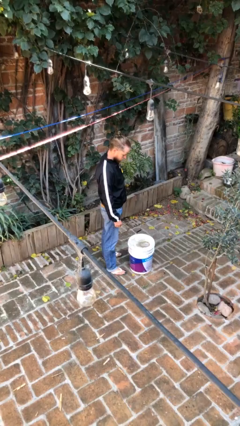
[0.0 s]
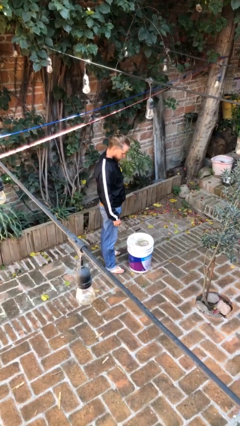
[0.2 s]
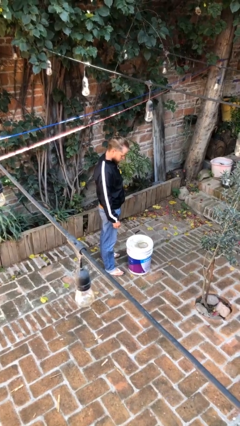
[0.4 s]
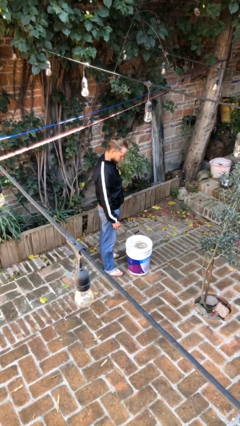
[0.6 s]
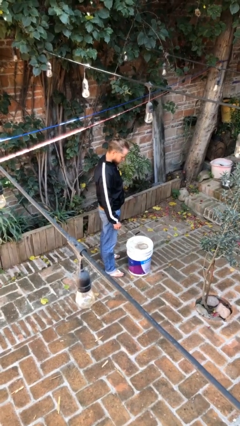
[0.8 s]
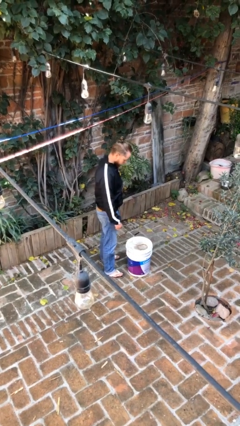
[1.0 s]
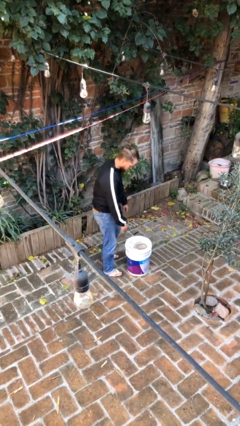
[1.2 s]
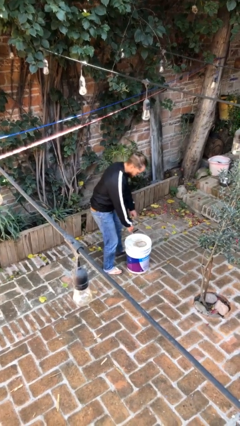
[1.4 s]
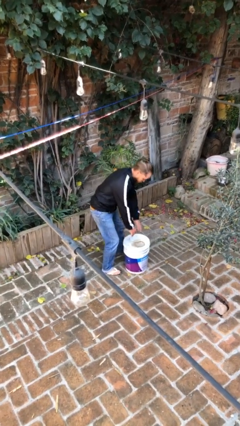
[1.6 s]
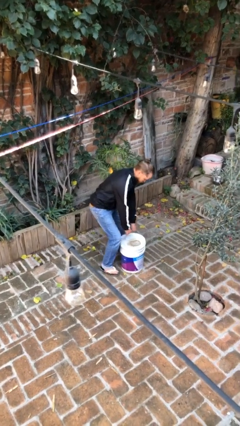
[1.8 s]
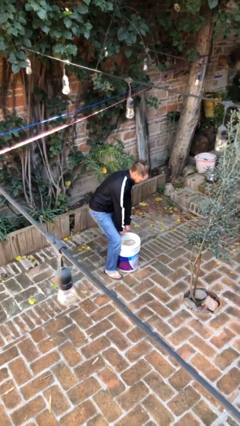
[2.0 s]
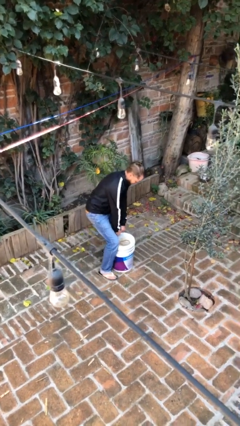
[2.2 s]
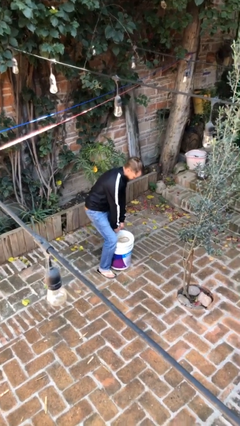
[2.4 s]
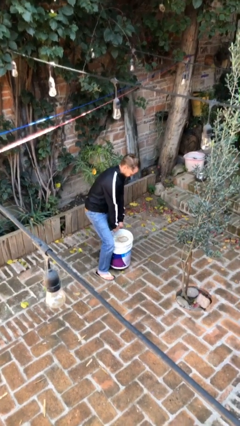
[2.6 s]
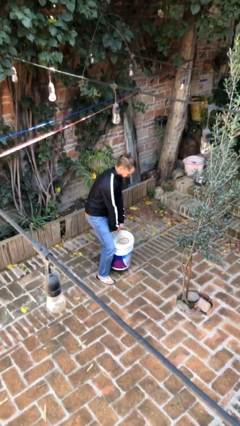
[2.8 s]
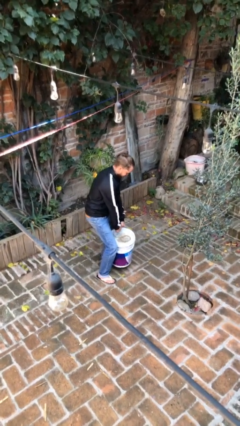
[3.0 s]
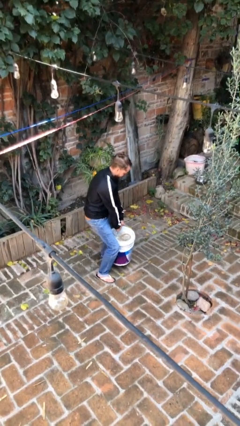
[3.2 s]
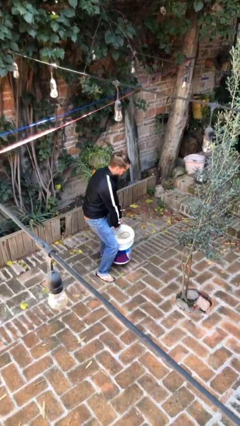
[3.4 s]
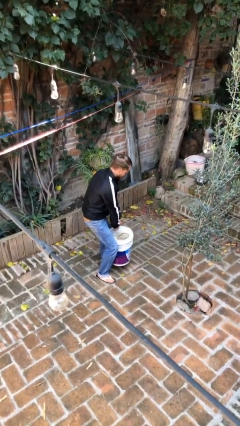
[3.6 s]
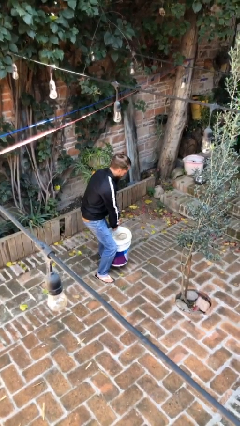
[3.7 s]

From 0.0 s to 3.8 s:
person picks up object from floor

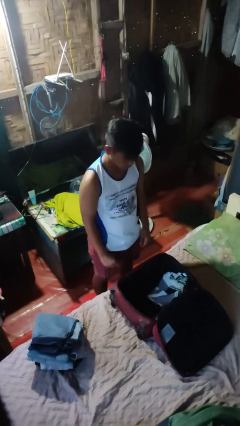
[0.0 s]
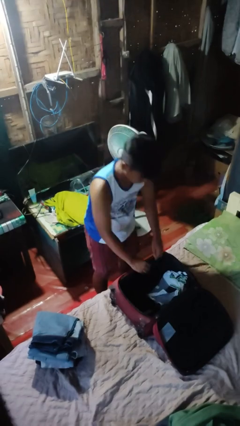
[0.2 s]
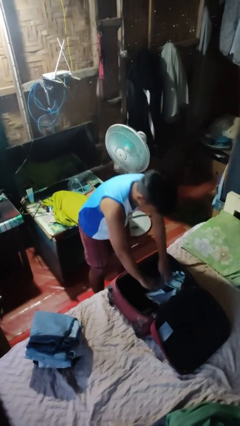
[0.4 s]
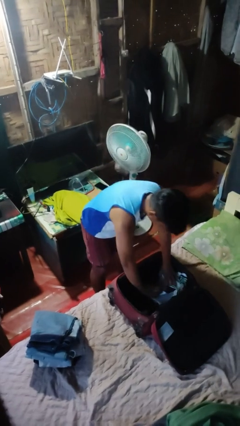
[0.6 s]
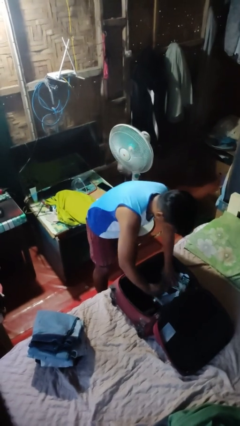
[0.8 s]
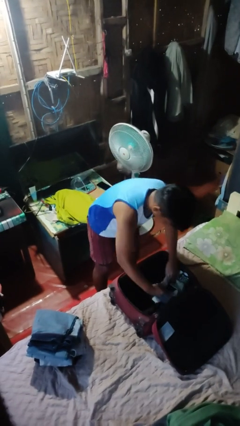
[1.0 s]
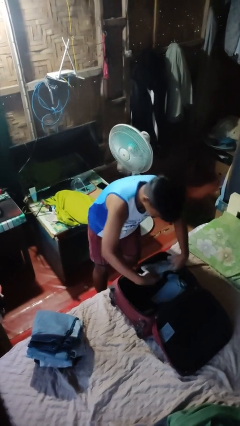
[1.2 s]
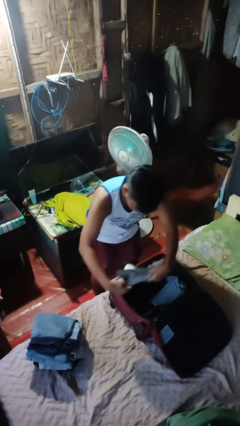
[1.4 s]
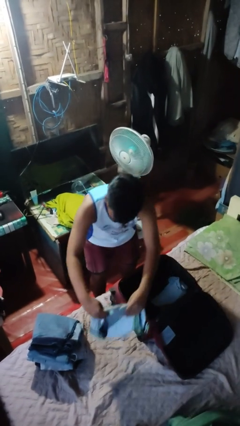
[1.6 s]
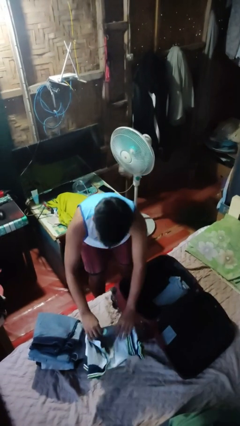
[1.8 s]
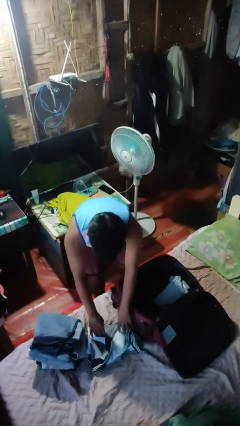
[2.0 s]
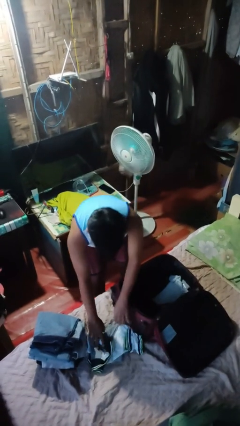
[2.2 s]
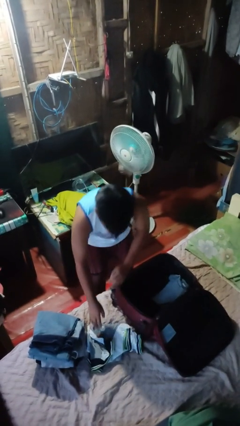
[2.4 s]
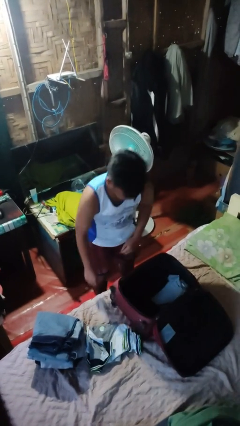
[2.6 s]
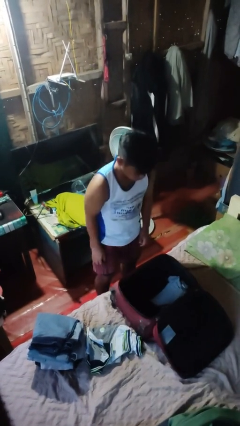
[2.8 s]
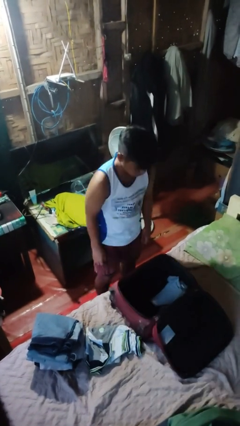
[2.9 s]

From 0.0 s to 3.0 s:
person unloads clothes from suitcase

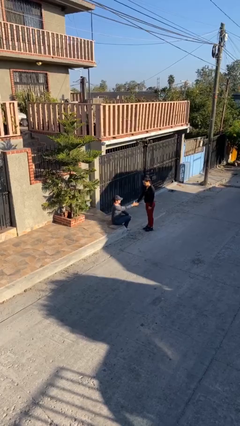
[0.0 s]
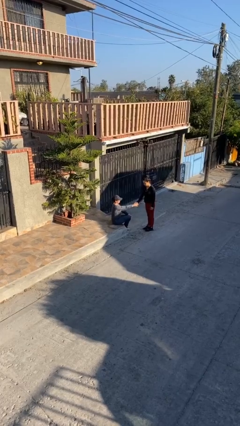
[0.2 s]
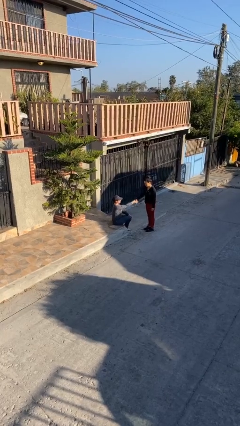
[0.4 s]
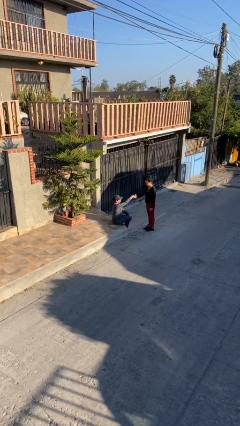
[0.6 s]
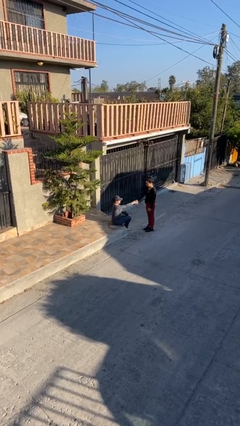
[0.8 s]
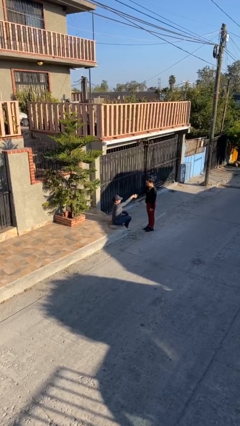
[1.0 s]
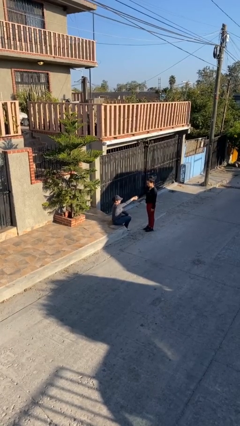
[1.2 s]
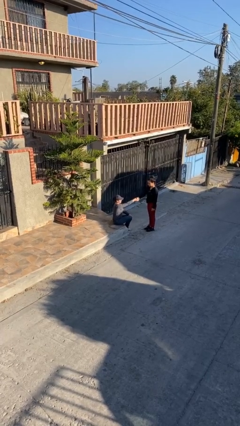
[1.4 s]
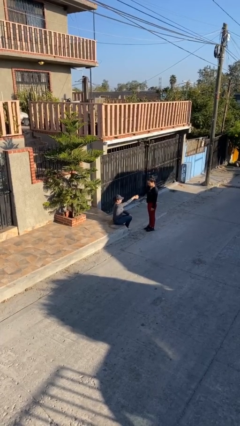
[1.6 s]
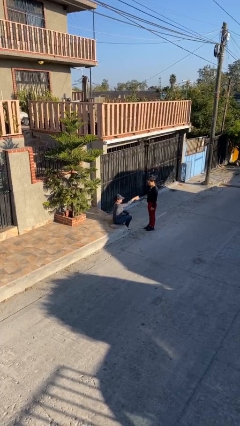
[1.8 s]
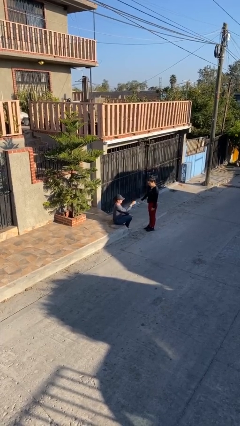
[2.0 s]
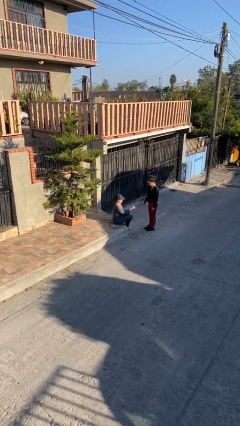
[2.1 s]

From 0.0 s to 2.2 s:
person shakes hand

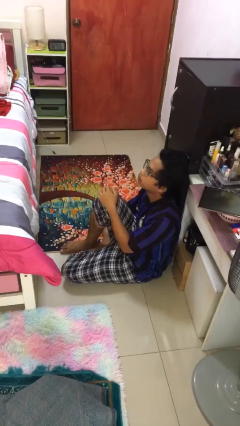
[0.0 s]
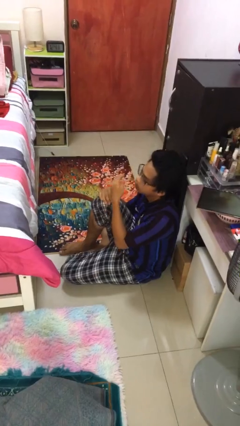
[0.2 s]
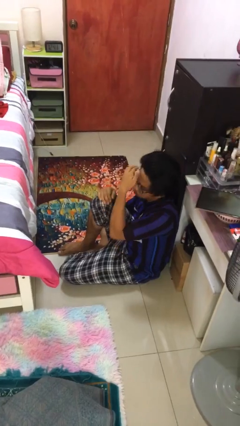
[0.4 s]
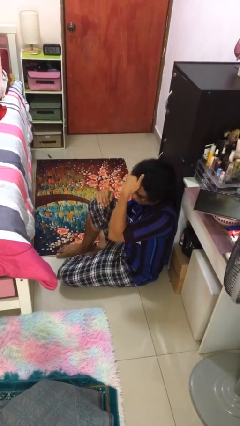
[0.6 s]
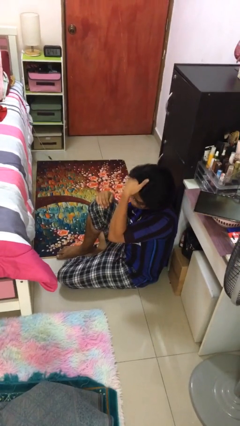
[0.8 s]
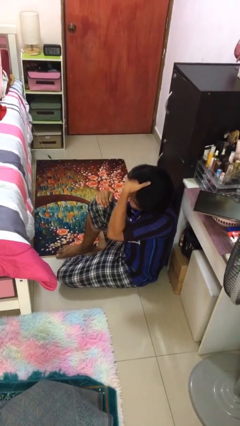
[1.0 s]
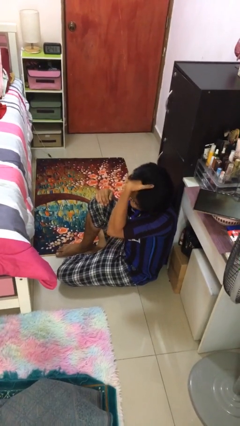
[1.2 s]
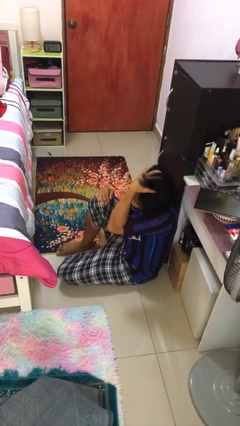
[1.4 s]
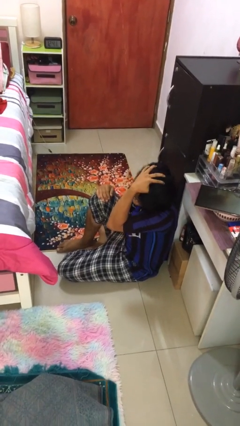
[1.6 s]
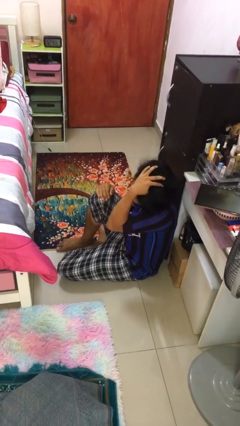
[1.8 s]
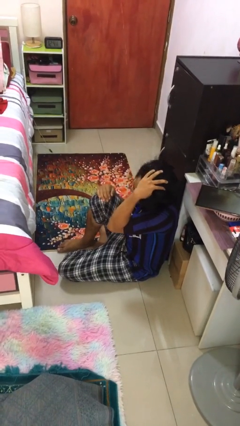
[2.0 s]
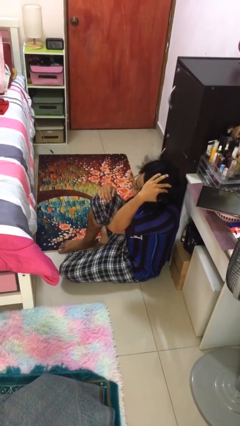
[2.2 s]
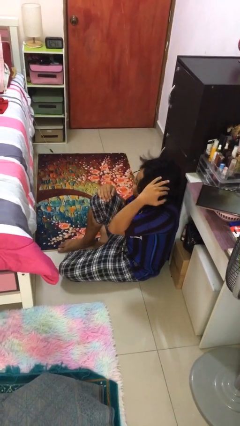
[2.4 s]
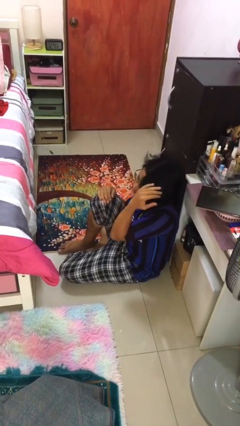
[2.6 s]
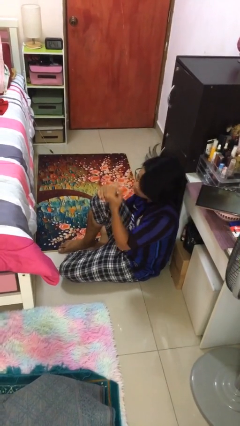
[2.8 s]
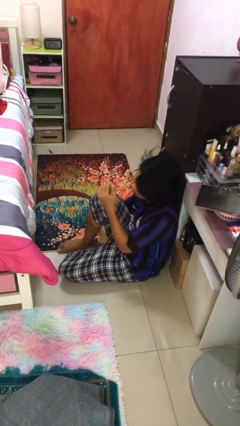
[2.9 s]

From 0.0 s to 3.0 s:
person strokes hair

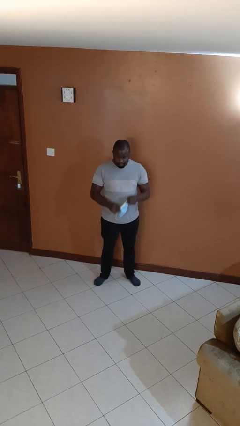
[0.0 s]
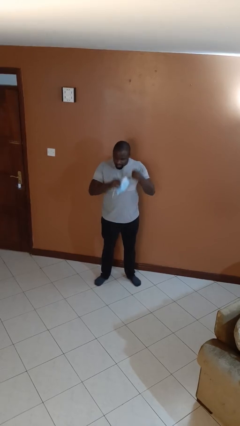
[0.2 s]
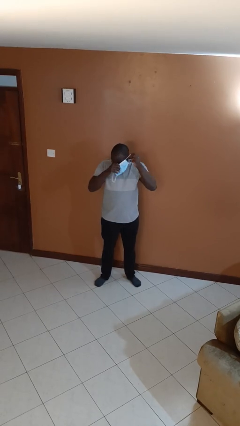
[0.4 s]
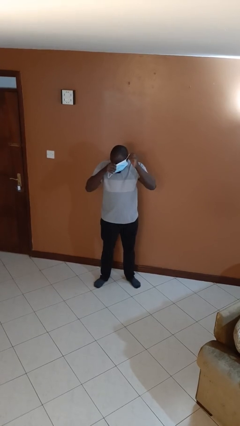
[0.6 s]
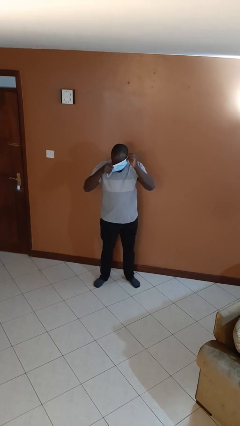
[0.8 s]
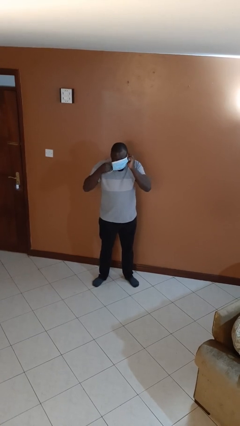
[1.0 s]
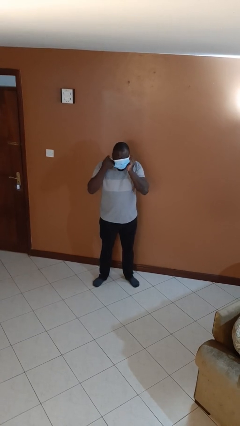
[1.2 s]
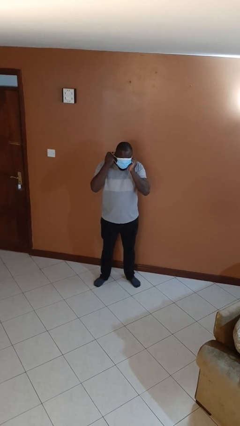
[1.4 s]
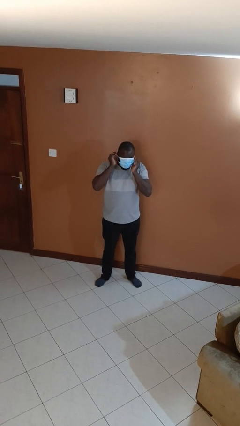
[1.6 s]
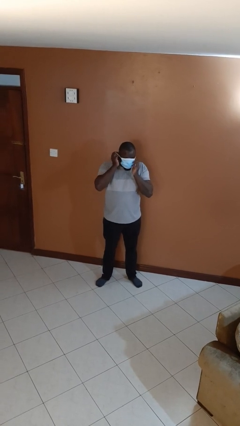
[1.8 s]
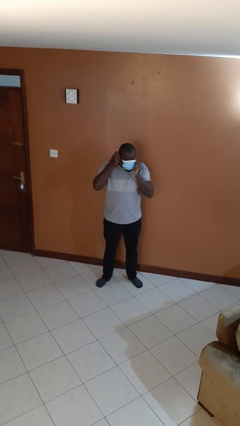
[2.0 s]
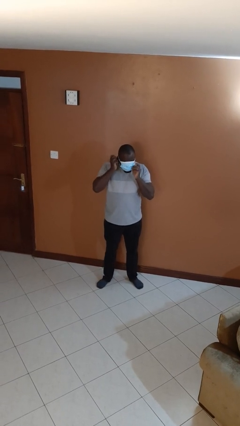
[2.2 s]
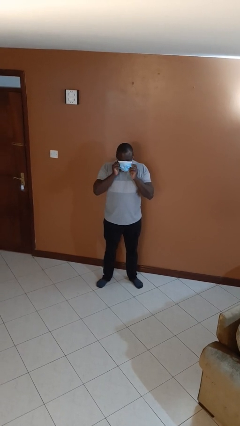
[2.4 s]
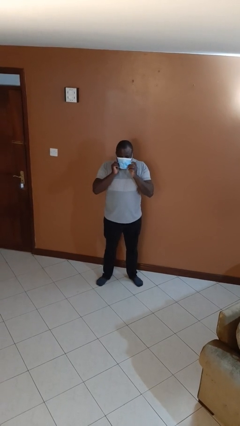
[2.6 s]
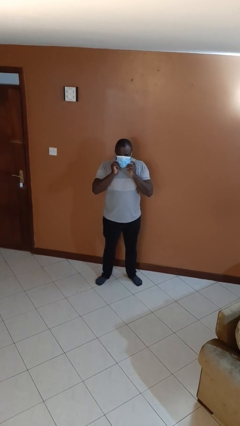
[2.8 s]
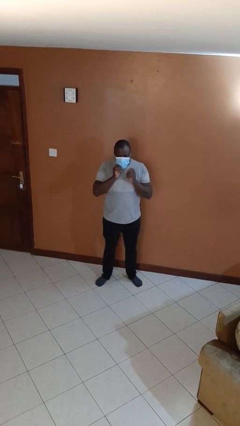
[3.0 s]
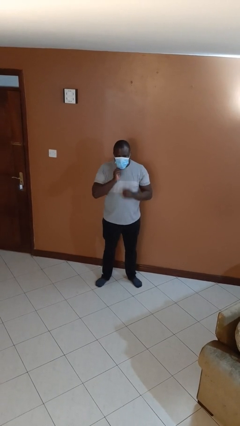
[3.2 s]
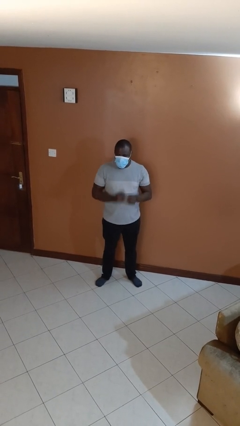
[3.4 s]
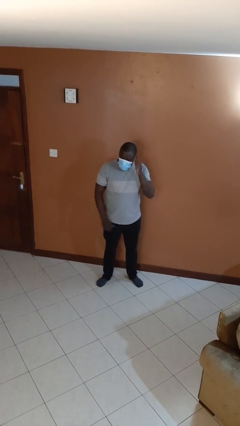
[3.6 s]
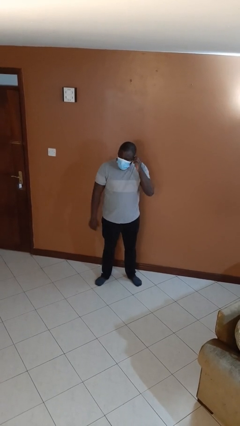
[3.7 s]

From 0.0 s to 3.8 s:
person puts on facemask

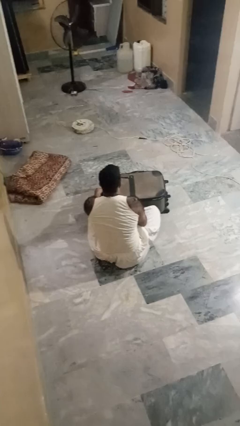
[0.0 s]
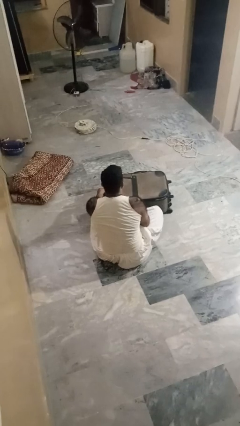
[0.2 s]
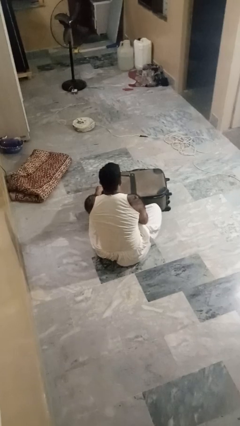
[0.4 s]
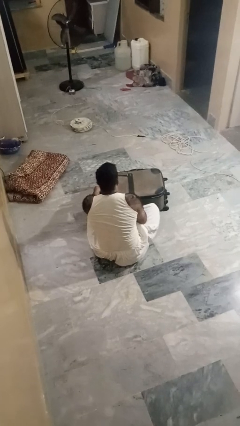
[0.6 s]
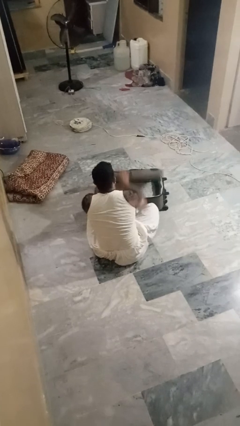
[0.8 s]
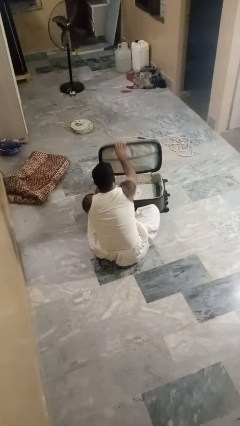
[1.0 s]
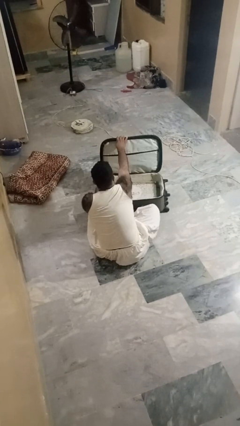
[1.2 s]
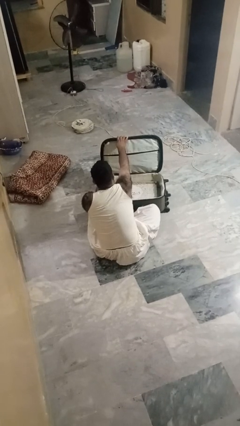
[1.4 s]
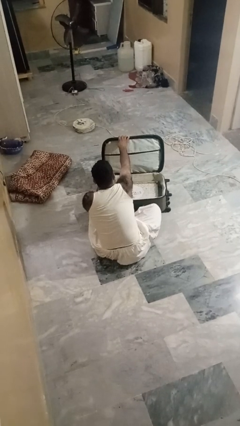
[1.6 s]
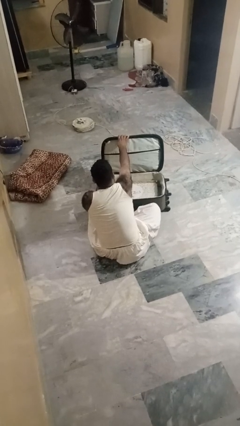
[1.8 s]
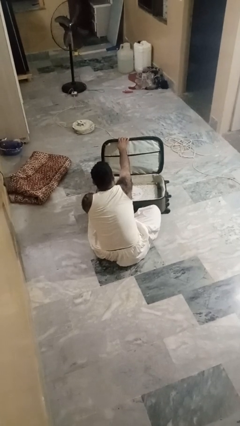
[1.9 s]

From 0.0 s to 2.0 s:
person opens suitcase
